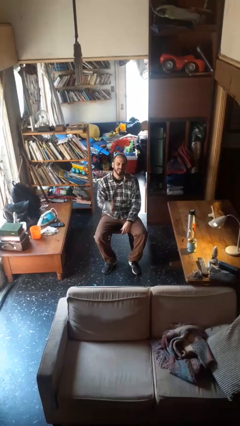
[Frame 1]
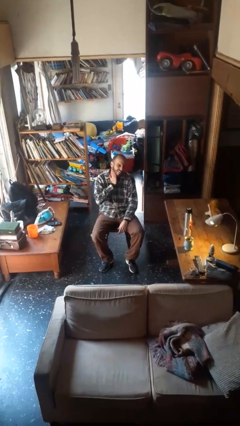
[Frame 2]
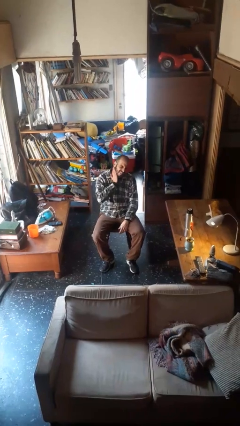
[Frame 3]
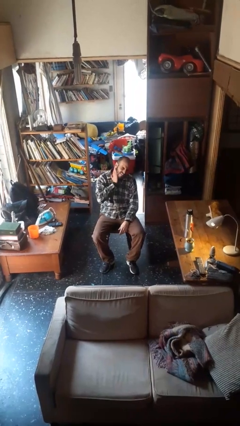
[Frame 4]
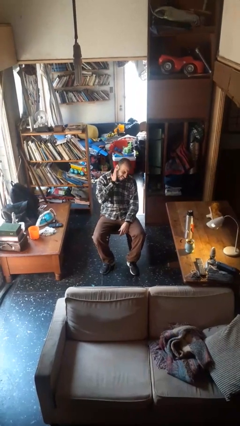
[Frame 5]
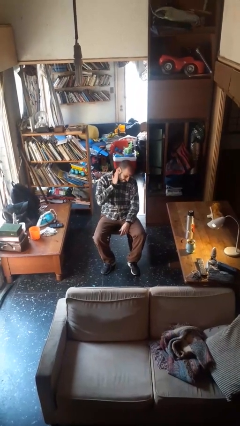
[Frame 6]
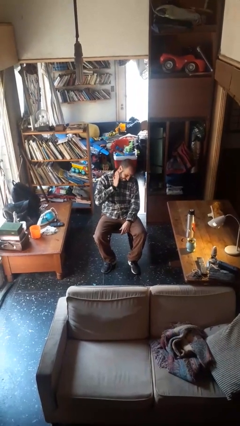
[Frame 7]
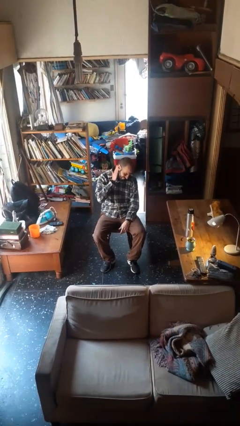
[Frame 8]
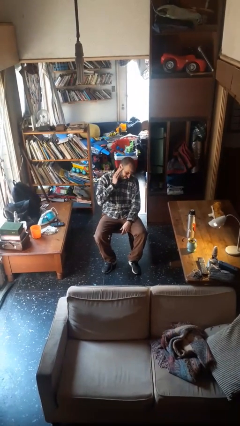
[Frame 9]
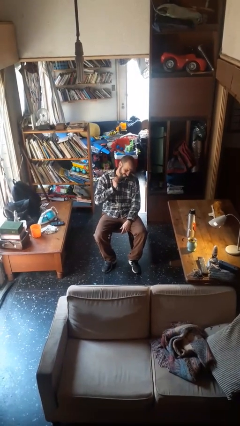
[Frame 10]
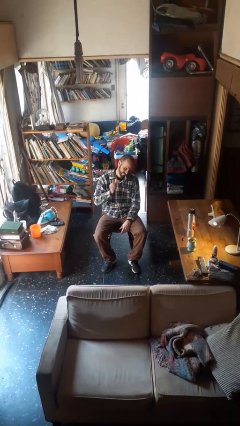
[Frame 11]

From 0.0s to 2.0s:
person swats bug

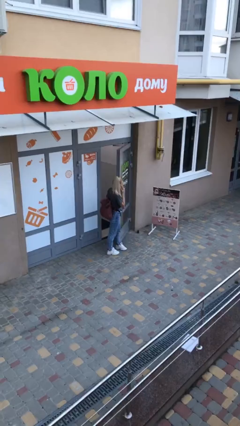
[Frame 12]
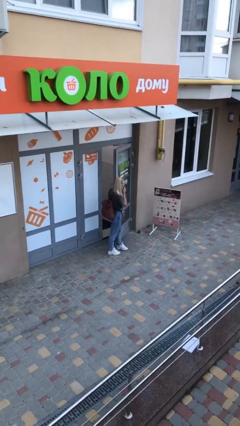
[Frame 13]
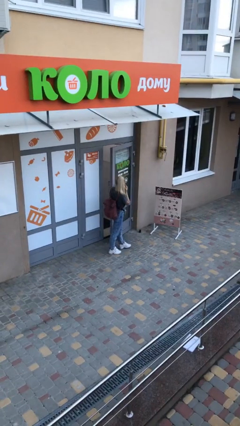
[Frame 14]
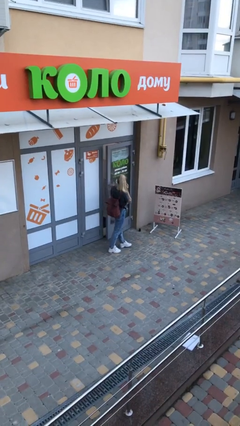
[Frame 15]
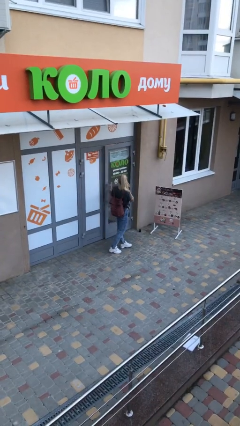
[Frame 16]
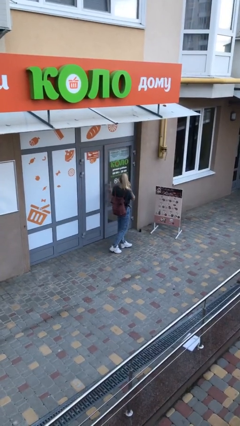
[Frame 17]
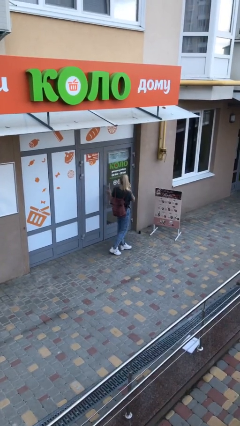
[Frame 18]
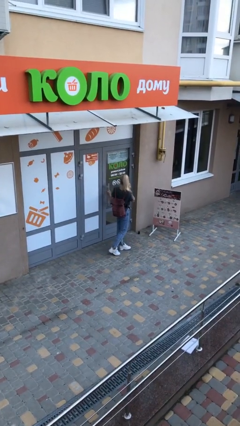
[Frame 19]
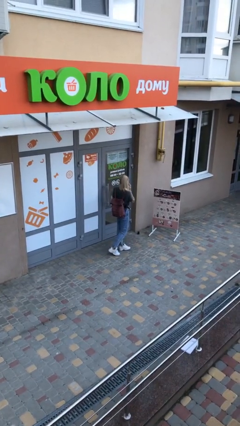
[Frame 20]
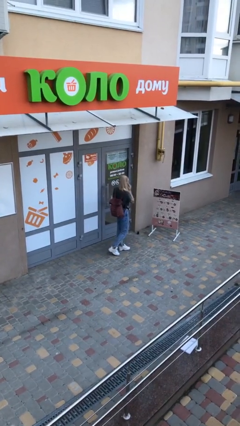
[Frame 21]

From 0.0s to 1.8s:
person closes facility door

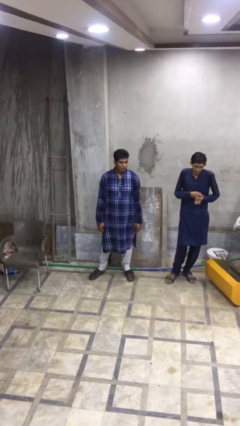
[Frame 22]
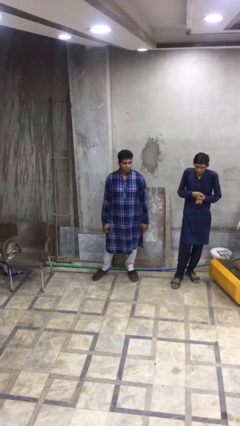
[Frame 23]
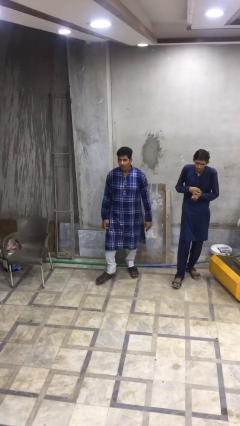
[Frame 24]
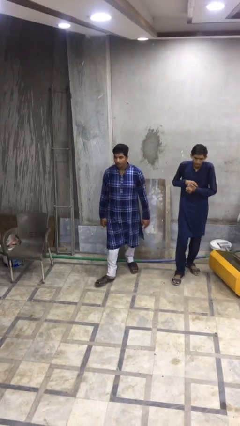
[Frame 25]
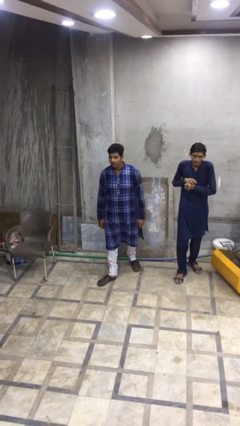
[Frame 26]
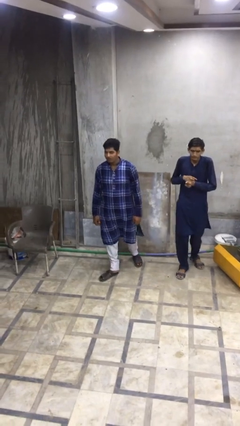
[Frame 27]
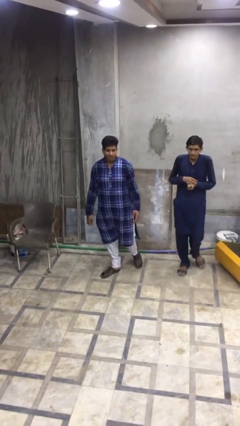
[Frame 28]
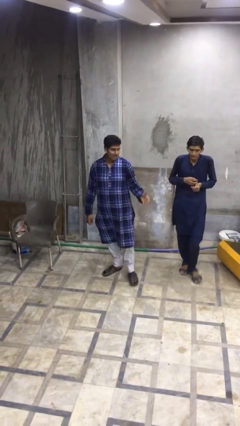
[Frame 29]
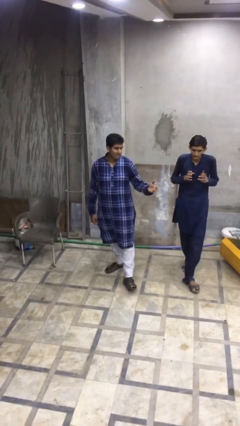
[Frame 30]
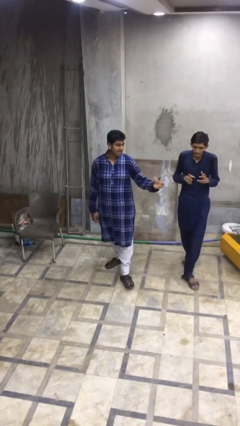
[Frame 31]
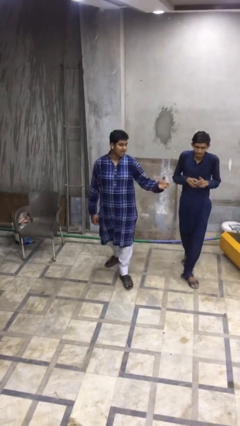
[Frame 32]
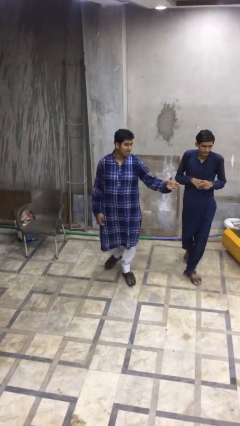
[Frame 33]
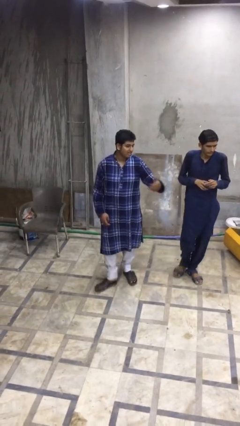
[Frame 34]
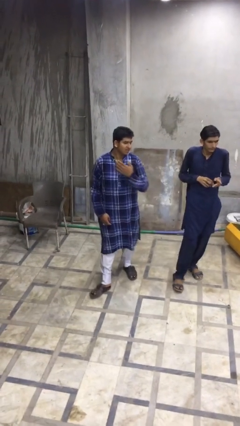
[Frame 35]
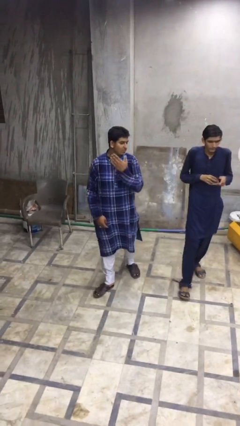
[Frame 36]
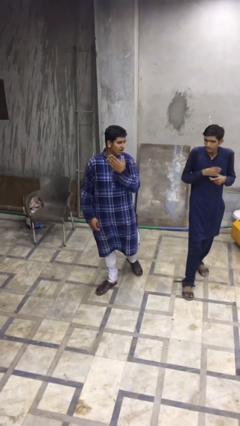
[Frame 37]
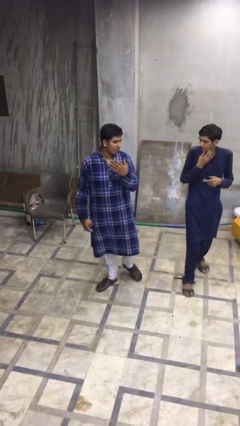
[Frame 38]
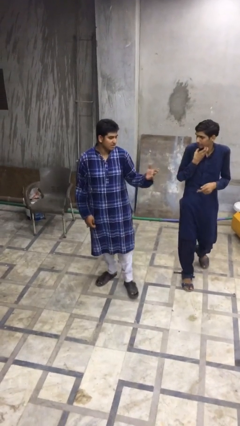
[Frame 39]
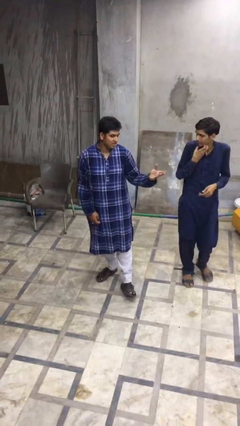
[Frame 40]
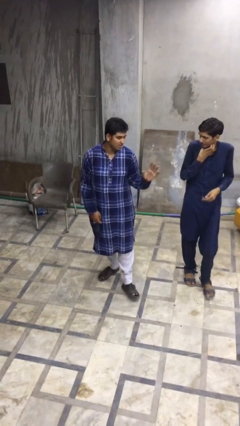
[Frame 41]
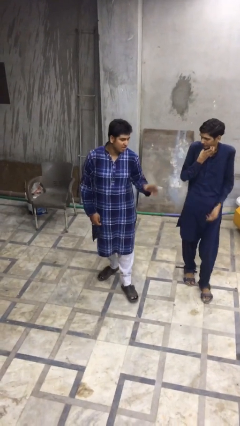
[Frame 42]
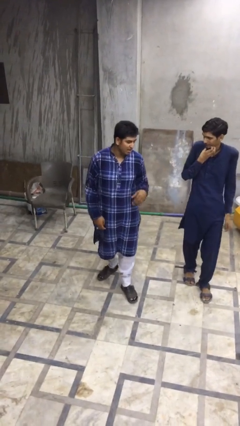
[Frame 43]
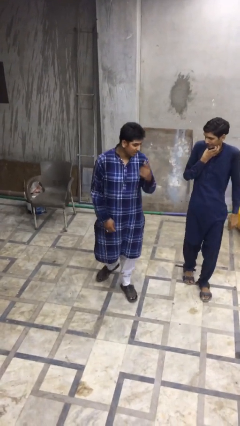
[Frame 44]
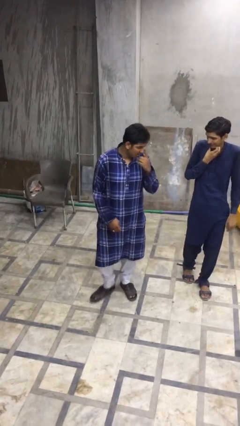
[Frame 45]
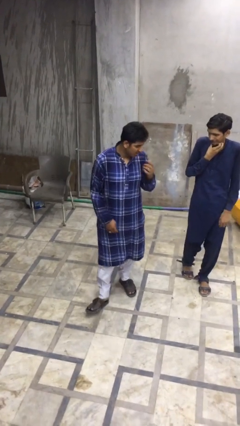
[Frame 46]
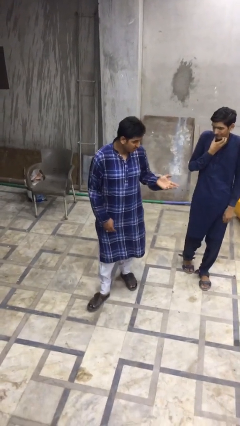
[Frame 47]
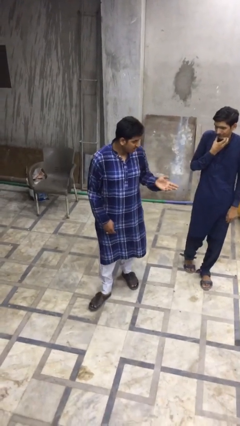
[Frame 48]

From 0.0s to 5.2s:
person talks to person

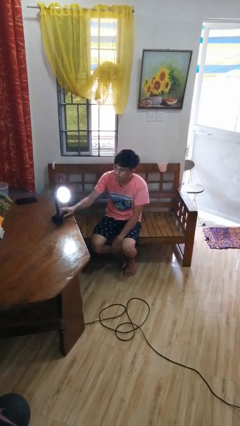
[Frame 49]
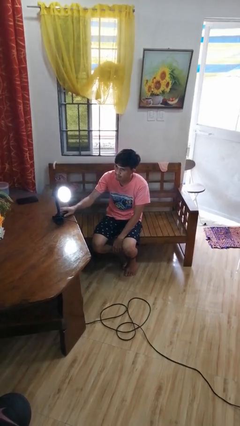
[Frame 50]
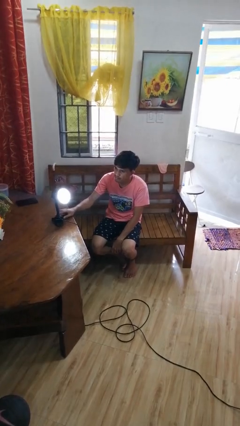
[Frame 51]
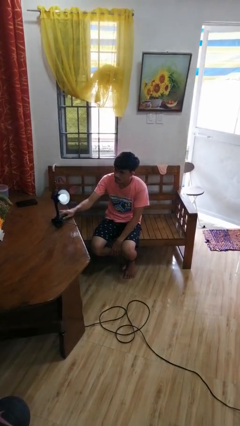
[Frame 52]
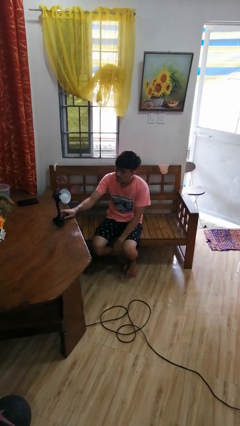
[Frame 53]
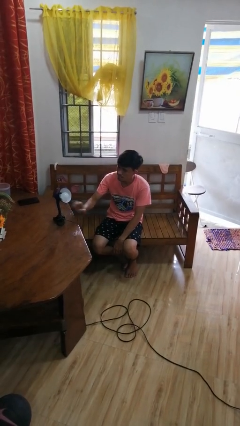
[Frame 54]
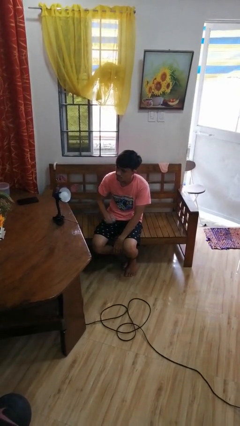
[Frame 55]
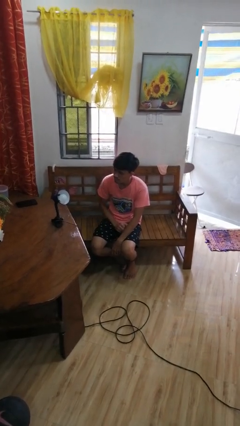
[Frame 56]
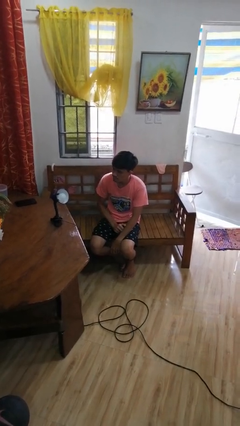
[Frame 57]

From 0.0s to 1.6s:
person turns off lamp

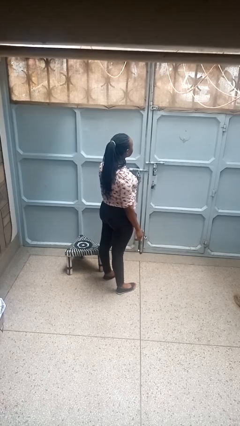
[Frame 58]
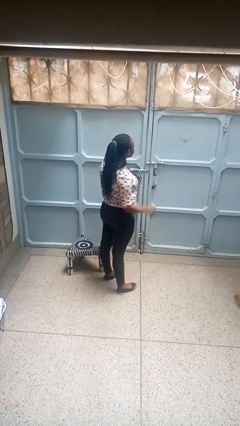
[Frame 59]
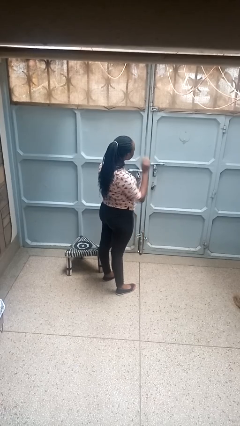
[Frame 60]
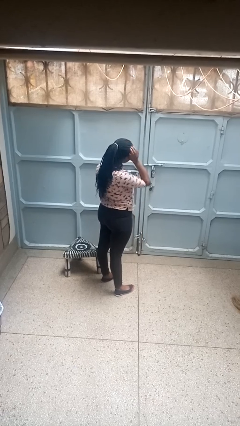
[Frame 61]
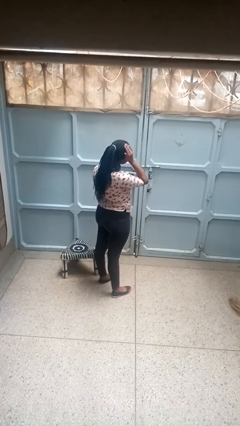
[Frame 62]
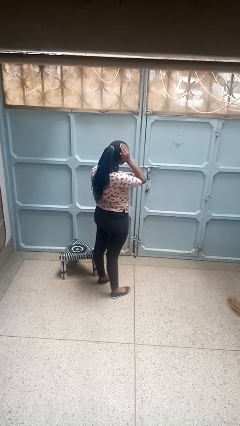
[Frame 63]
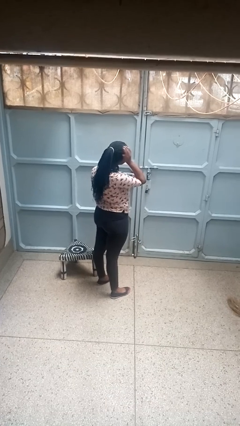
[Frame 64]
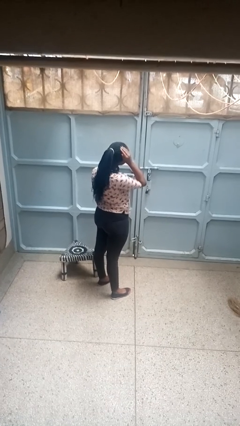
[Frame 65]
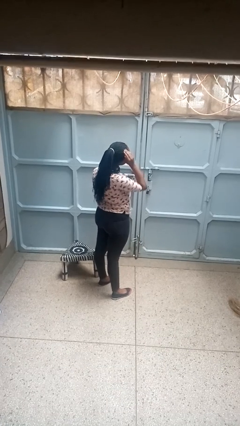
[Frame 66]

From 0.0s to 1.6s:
person pats head

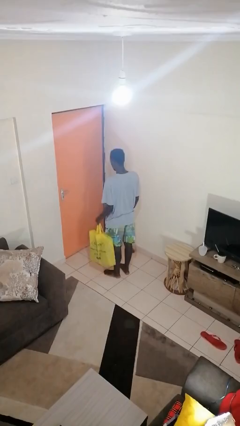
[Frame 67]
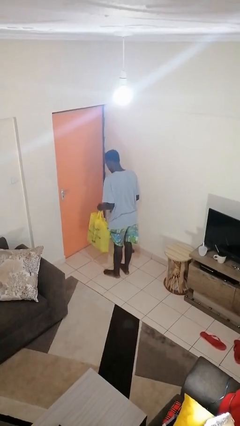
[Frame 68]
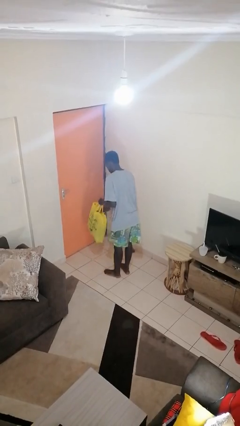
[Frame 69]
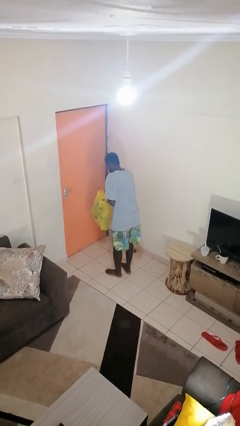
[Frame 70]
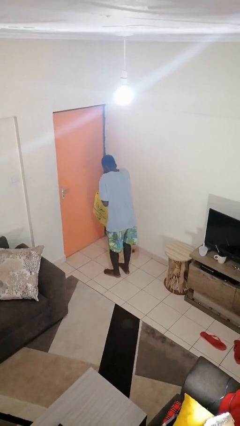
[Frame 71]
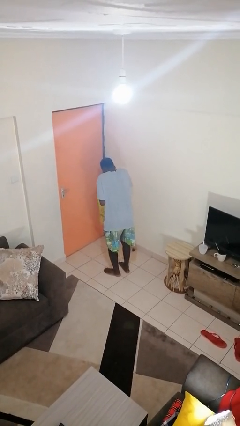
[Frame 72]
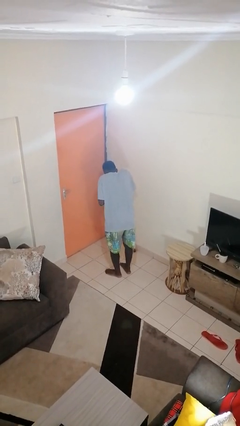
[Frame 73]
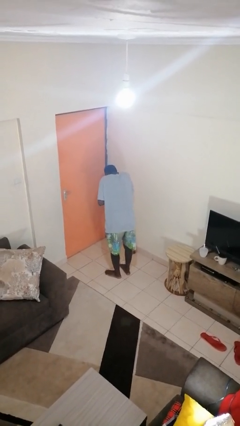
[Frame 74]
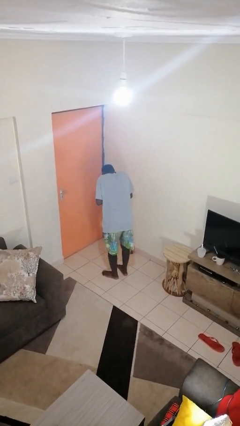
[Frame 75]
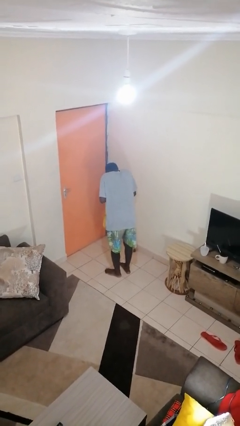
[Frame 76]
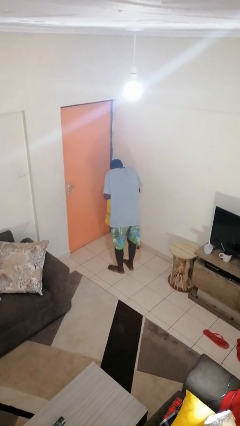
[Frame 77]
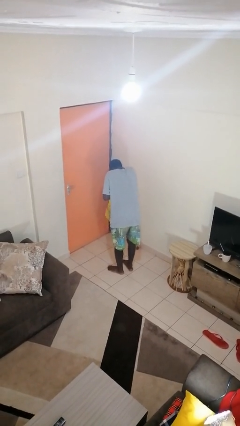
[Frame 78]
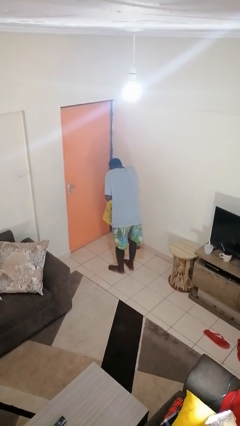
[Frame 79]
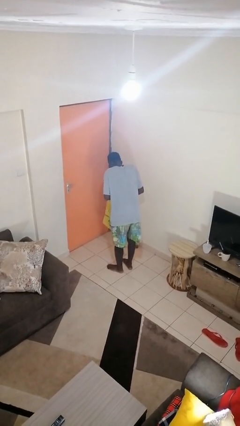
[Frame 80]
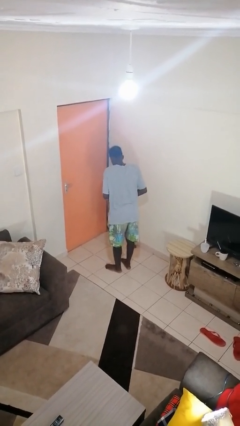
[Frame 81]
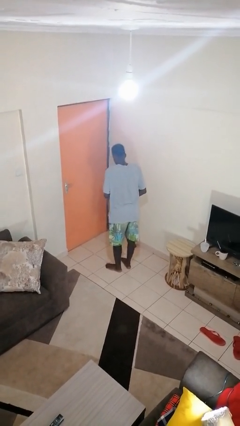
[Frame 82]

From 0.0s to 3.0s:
person searches in bag

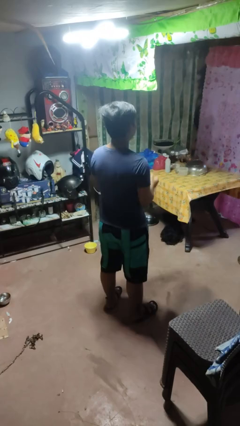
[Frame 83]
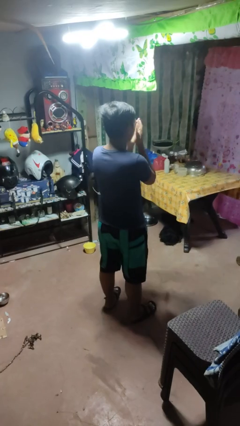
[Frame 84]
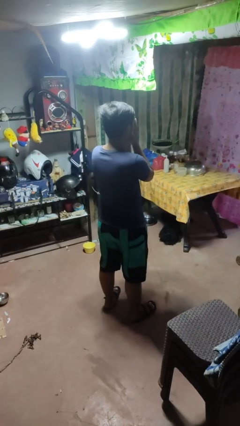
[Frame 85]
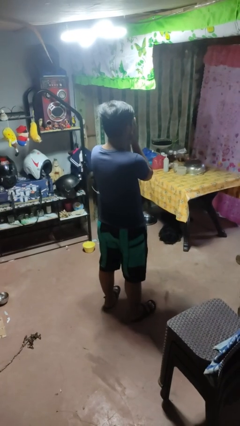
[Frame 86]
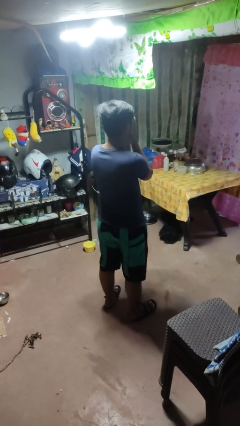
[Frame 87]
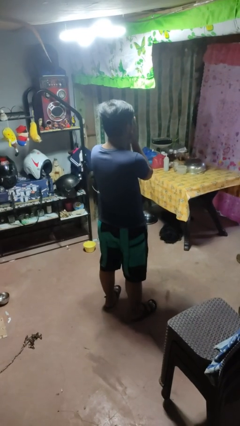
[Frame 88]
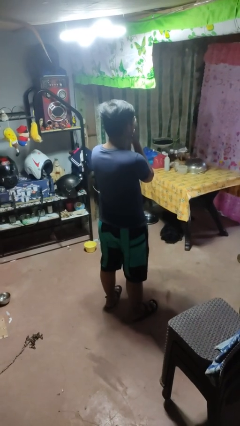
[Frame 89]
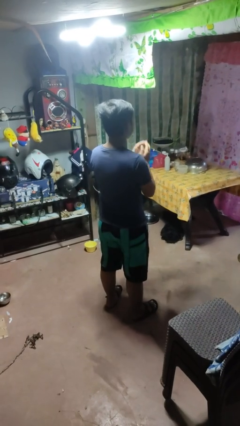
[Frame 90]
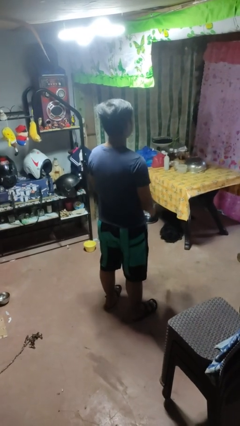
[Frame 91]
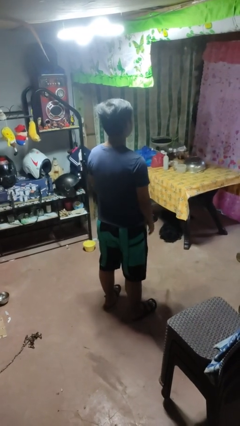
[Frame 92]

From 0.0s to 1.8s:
person covers face with hands
